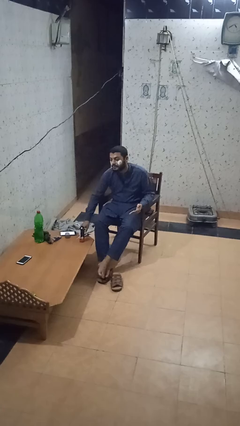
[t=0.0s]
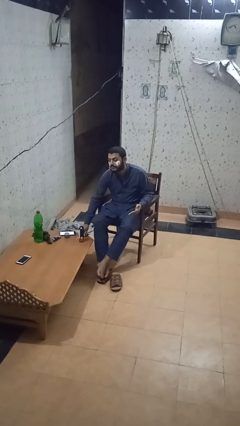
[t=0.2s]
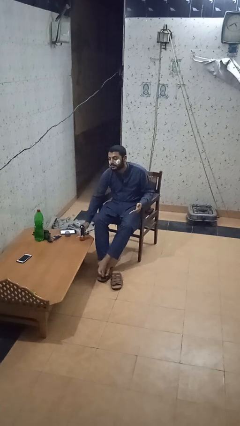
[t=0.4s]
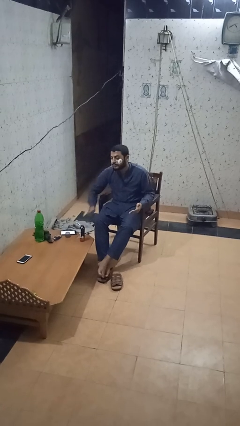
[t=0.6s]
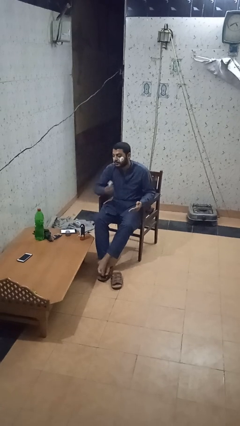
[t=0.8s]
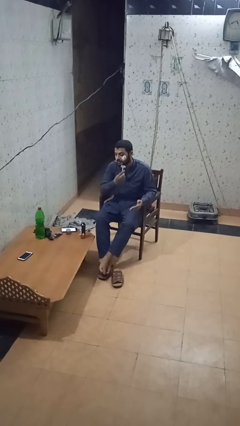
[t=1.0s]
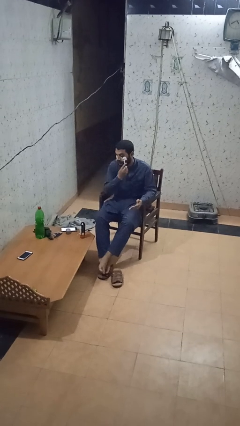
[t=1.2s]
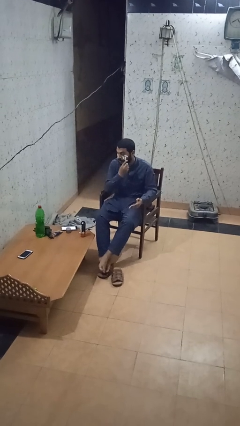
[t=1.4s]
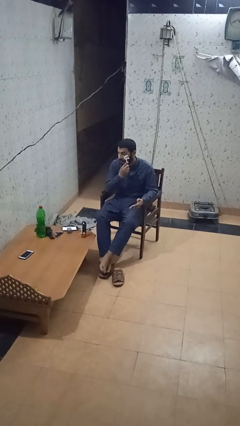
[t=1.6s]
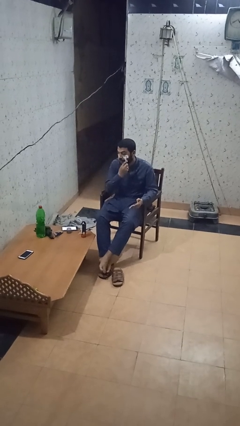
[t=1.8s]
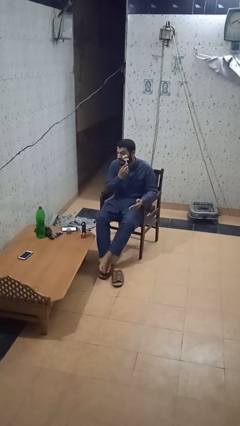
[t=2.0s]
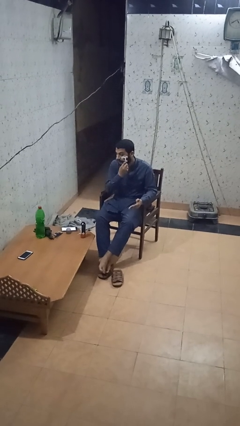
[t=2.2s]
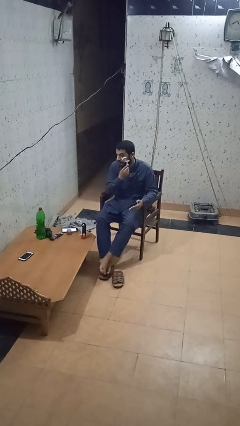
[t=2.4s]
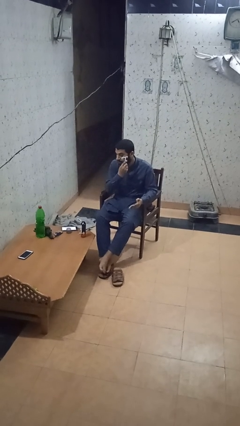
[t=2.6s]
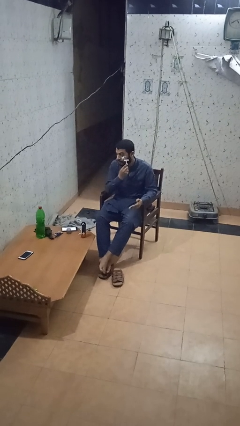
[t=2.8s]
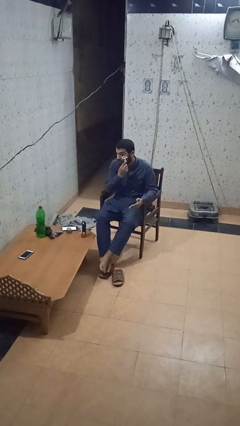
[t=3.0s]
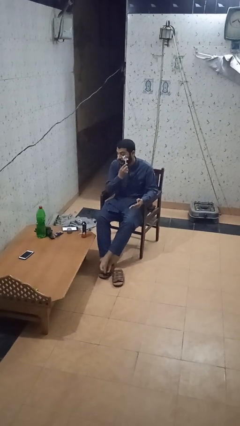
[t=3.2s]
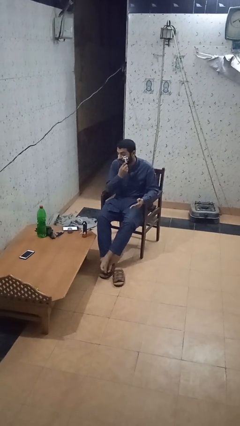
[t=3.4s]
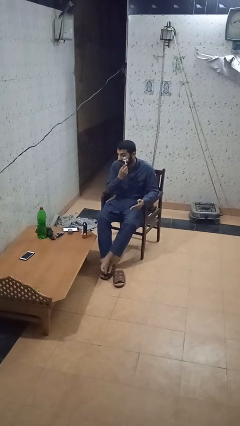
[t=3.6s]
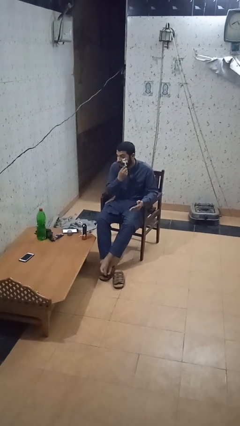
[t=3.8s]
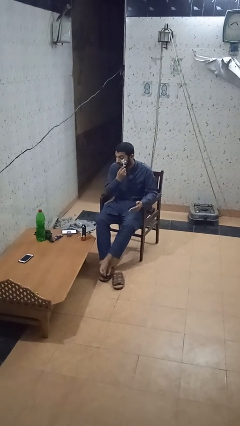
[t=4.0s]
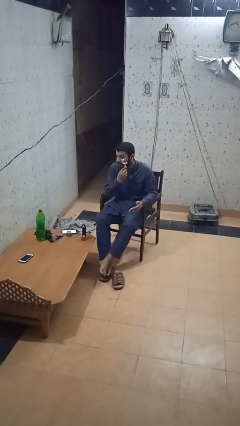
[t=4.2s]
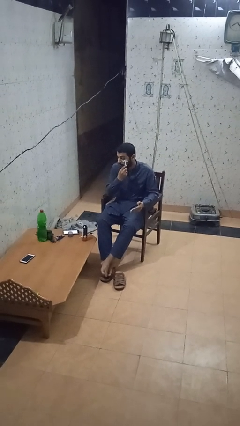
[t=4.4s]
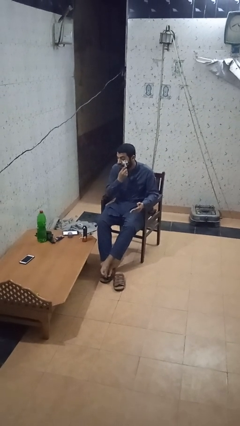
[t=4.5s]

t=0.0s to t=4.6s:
person shaves face

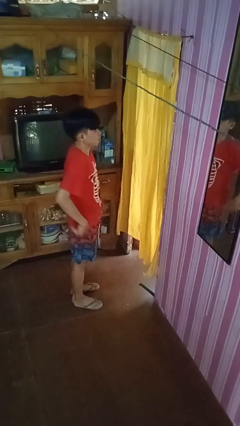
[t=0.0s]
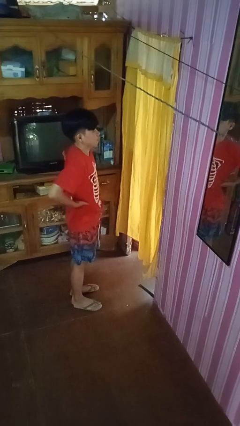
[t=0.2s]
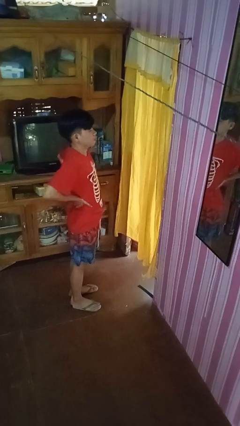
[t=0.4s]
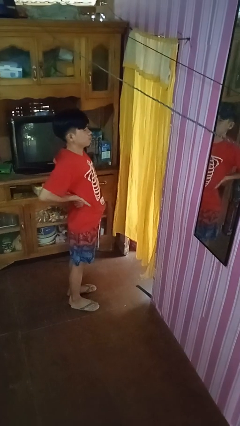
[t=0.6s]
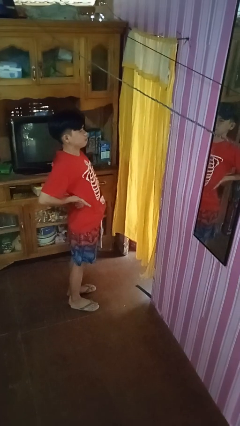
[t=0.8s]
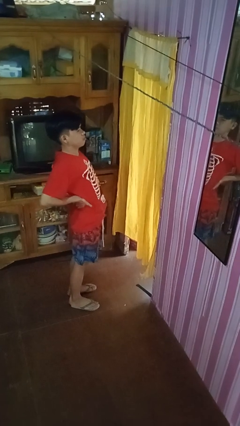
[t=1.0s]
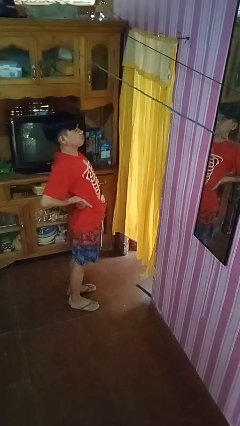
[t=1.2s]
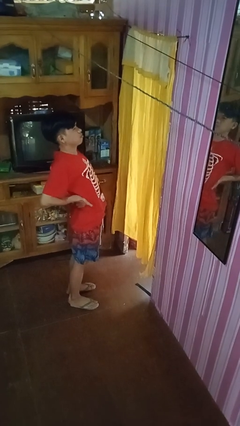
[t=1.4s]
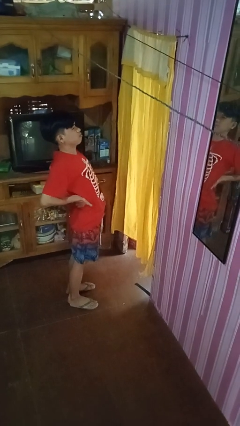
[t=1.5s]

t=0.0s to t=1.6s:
person stretches back

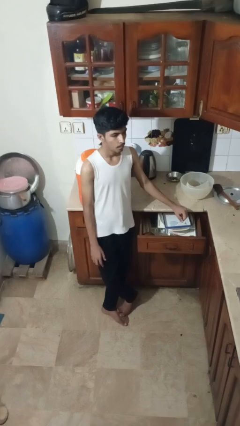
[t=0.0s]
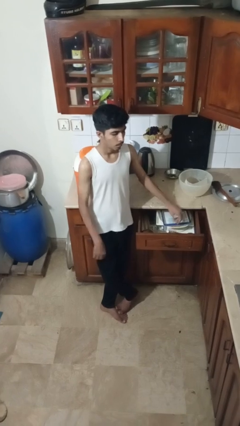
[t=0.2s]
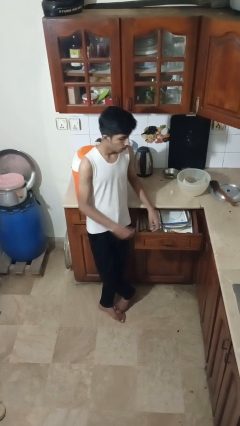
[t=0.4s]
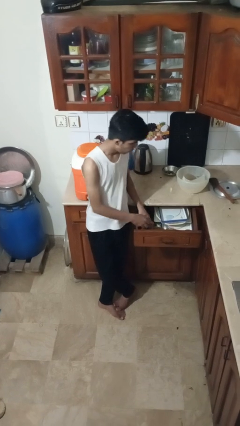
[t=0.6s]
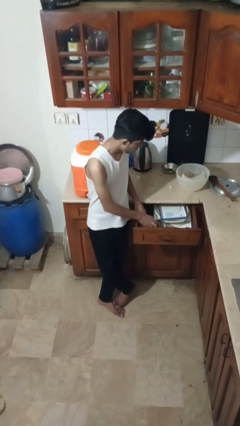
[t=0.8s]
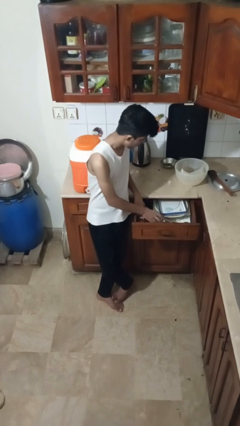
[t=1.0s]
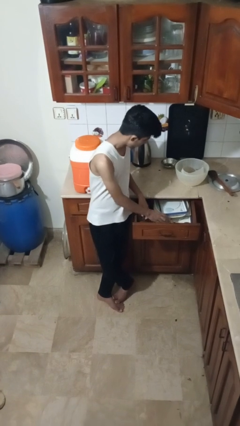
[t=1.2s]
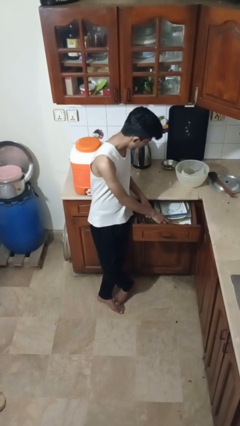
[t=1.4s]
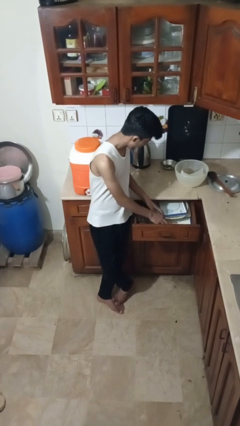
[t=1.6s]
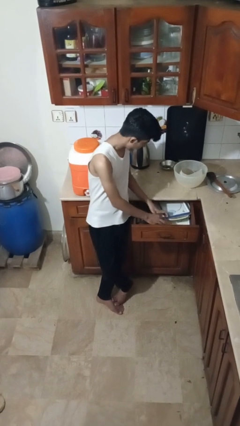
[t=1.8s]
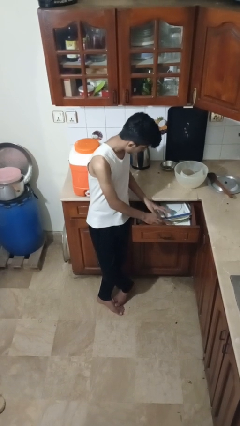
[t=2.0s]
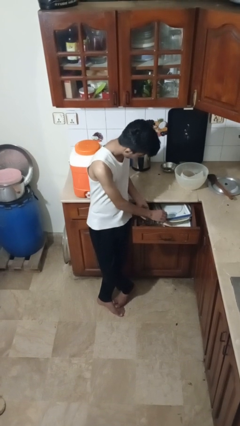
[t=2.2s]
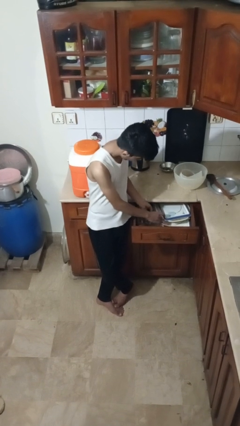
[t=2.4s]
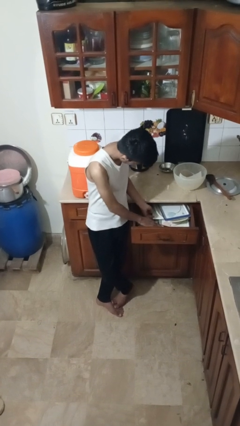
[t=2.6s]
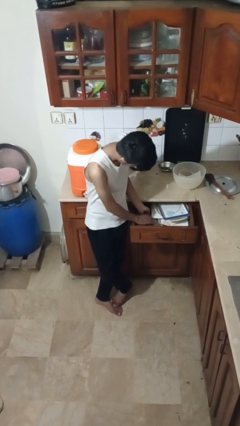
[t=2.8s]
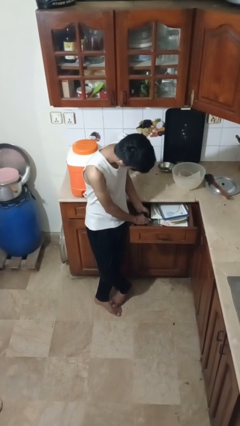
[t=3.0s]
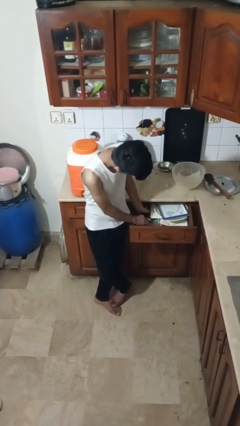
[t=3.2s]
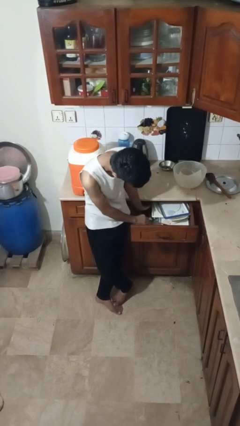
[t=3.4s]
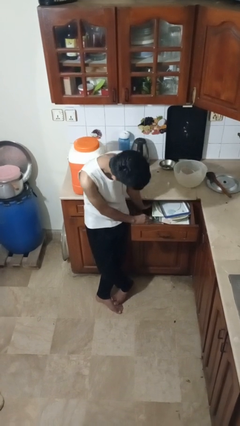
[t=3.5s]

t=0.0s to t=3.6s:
person searches in kitchen drawer

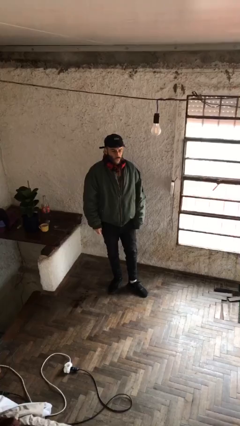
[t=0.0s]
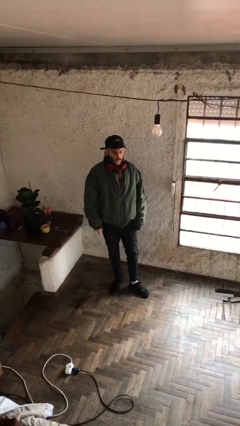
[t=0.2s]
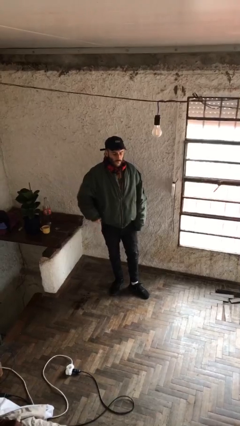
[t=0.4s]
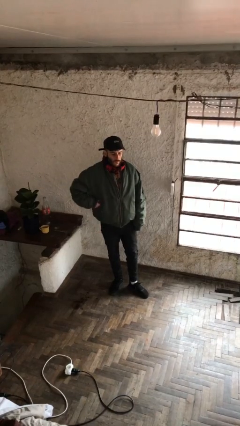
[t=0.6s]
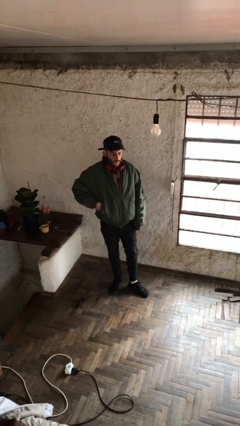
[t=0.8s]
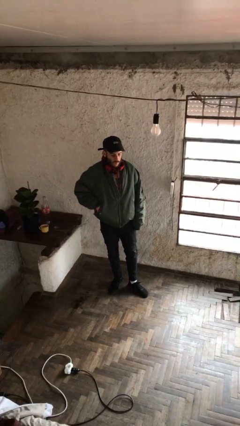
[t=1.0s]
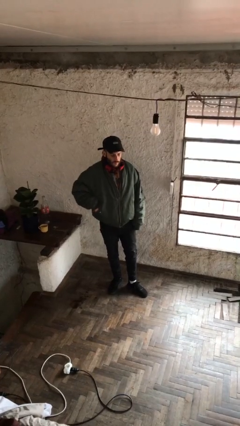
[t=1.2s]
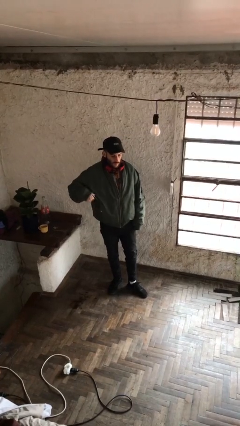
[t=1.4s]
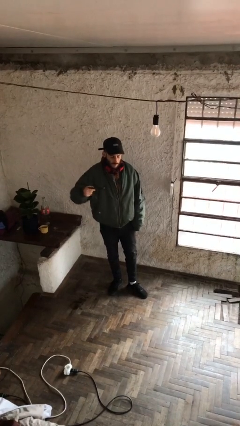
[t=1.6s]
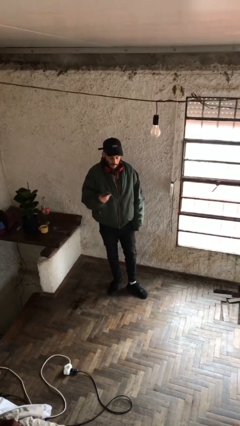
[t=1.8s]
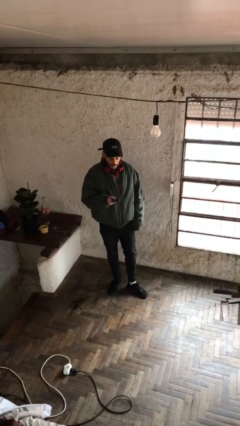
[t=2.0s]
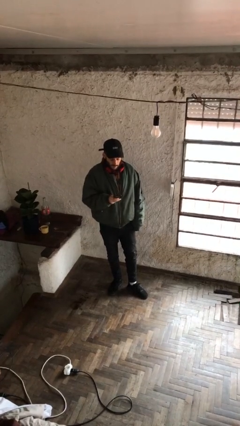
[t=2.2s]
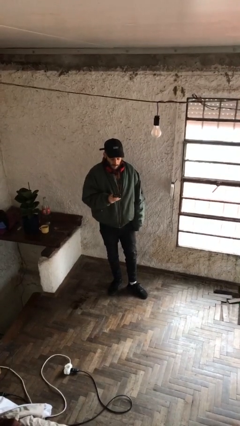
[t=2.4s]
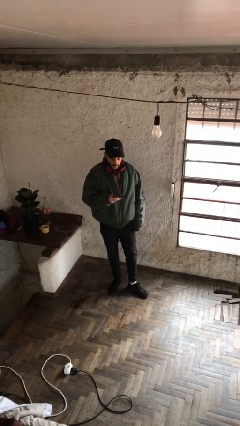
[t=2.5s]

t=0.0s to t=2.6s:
person takes phone from pocket

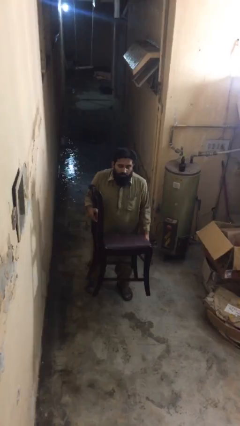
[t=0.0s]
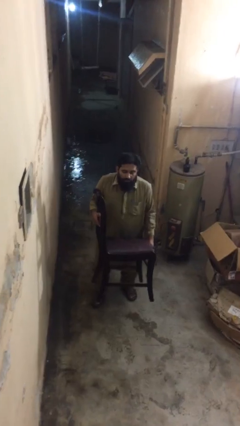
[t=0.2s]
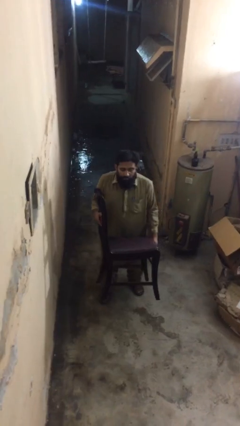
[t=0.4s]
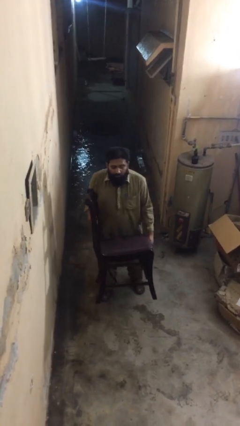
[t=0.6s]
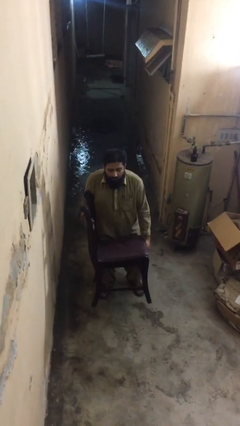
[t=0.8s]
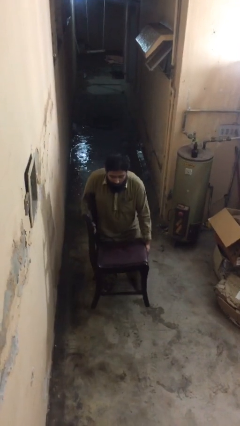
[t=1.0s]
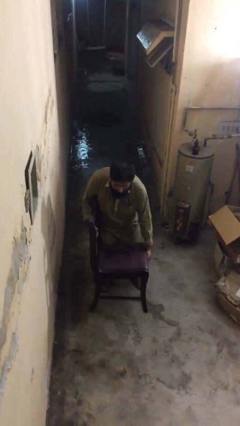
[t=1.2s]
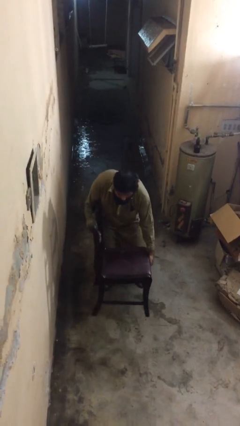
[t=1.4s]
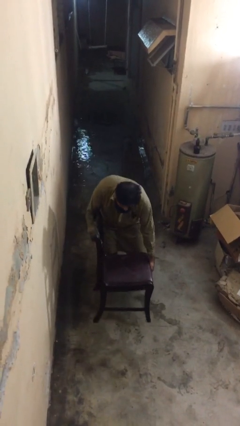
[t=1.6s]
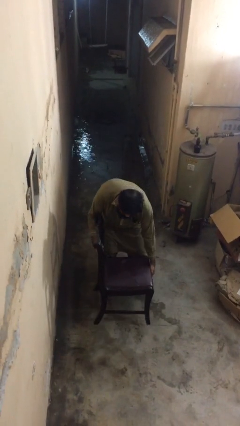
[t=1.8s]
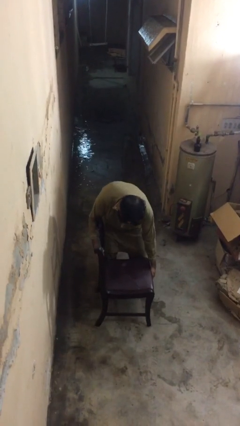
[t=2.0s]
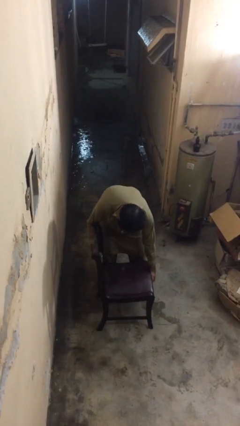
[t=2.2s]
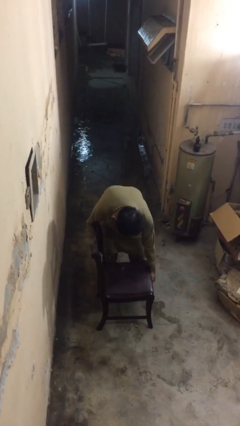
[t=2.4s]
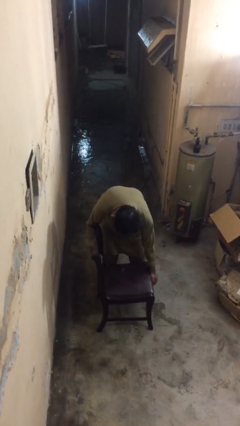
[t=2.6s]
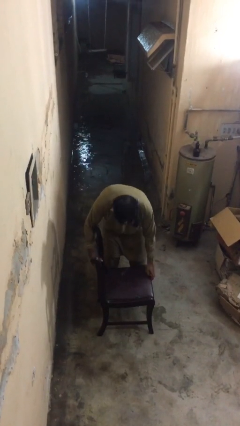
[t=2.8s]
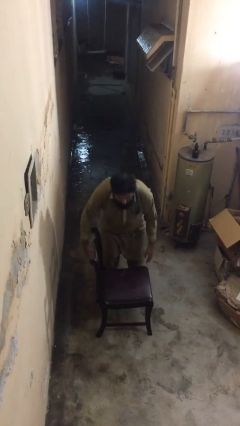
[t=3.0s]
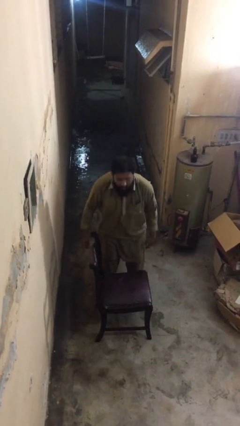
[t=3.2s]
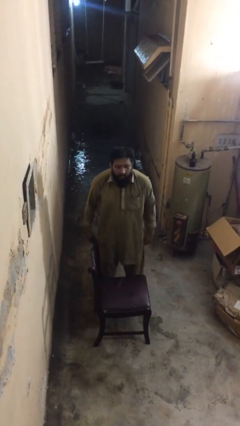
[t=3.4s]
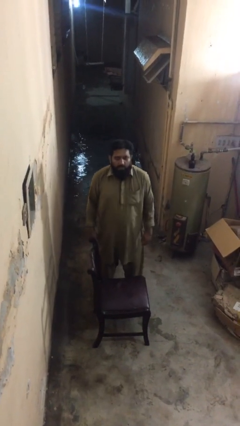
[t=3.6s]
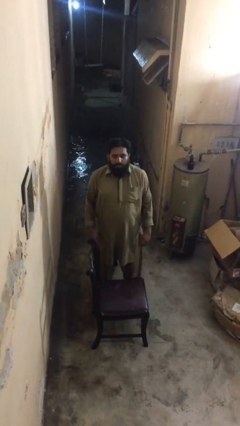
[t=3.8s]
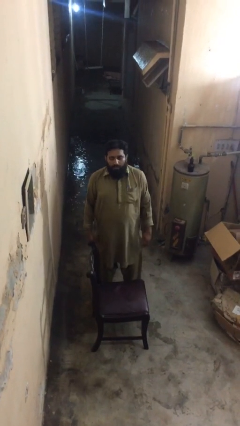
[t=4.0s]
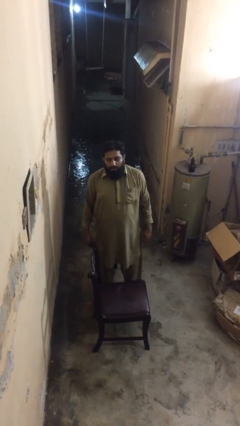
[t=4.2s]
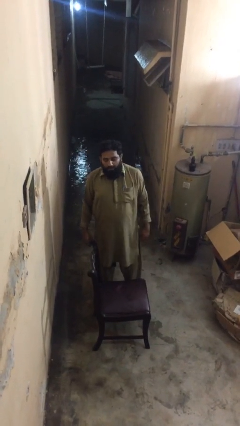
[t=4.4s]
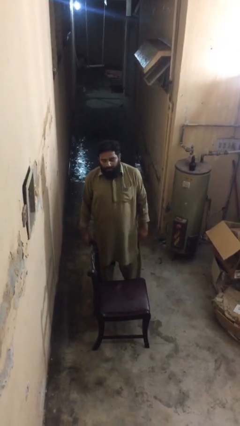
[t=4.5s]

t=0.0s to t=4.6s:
person puts down object on floor

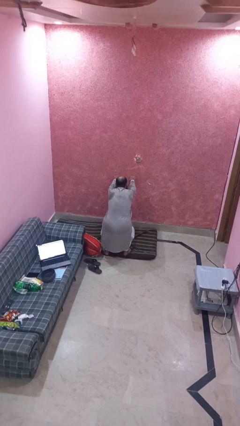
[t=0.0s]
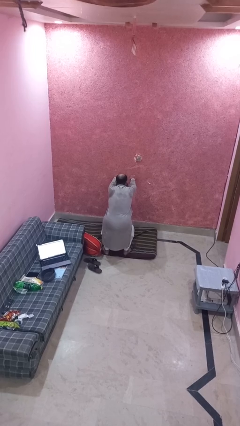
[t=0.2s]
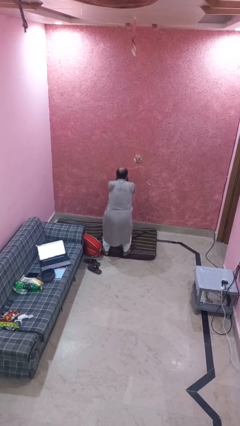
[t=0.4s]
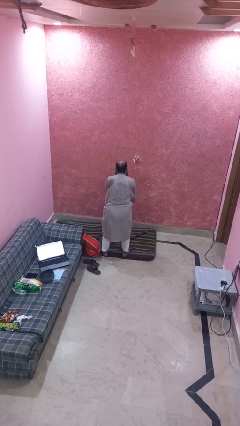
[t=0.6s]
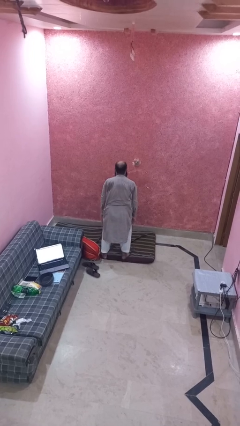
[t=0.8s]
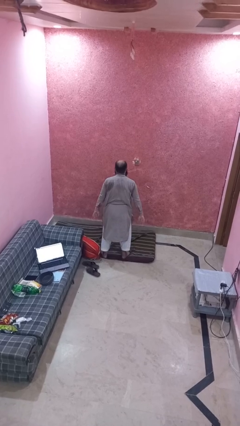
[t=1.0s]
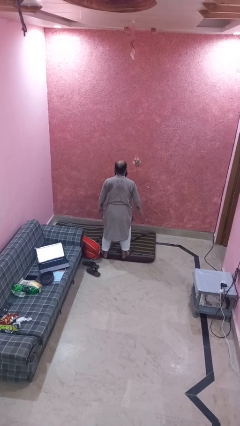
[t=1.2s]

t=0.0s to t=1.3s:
person stands up
